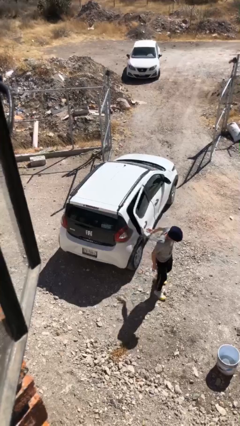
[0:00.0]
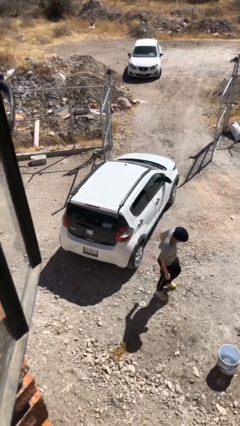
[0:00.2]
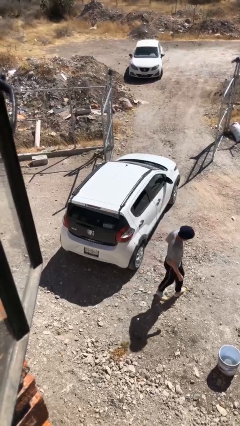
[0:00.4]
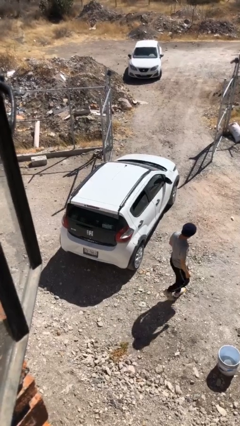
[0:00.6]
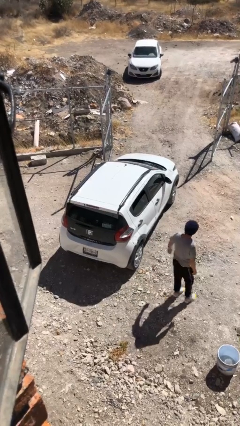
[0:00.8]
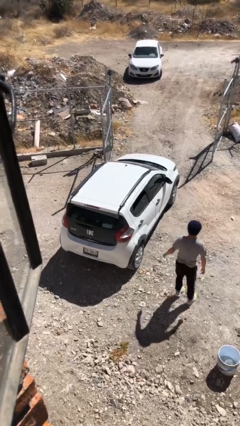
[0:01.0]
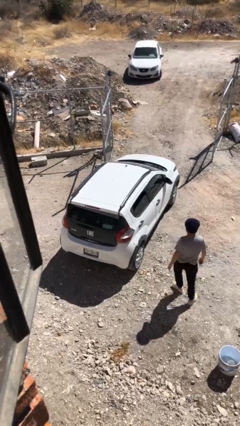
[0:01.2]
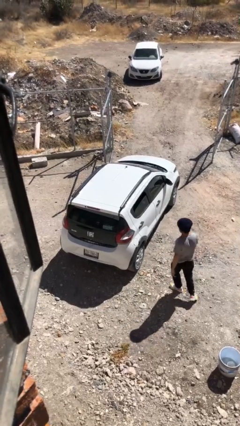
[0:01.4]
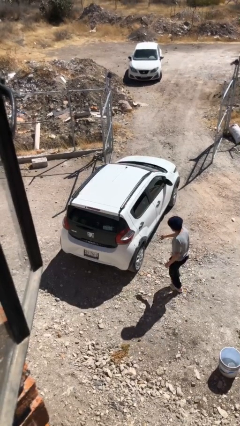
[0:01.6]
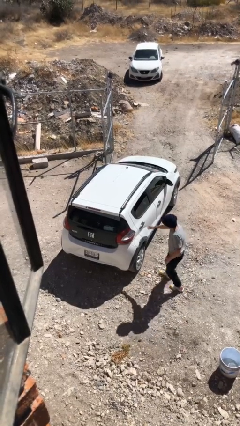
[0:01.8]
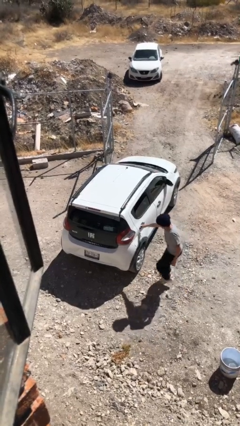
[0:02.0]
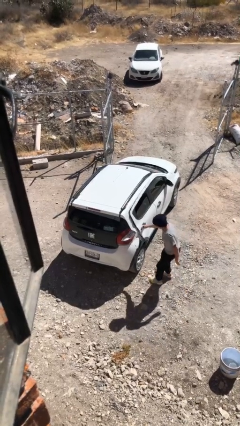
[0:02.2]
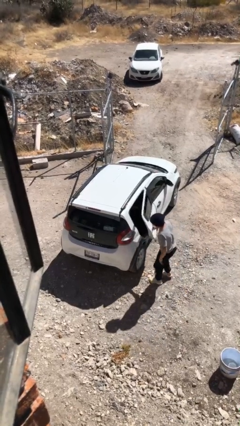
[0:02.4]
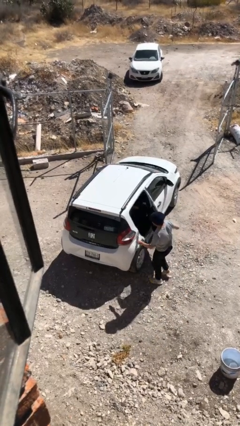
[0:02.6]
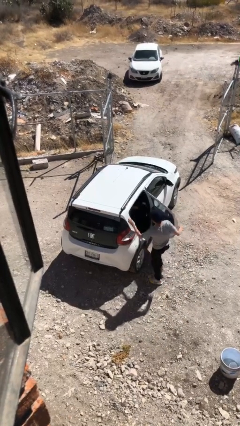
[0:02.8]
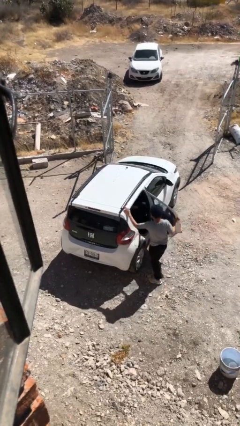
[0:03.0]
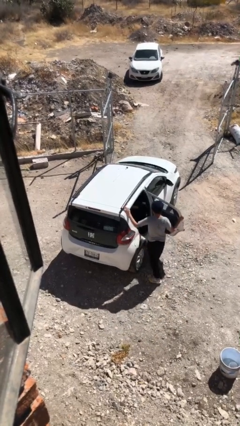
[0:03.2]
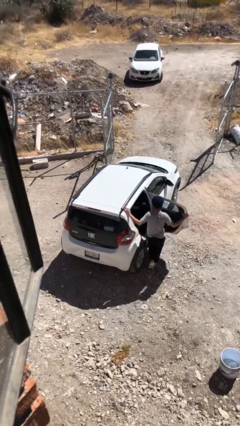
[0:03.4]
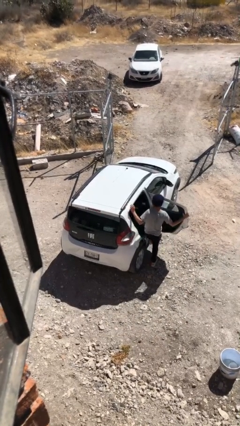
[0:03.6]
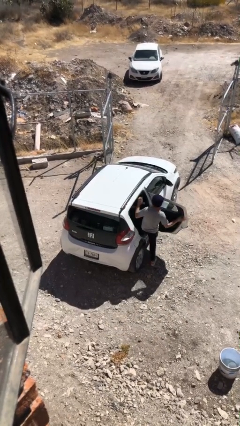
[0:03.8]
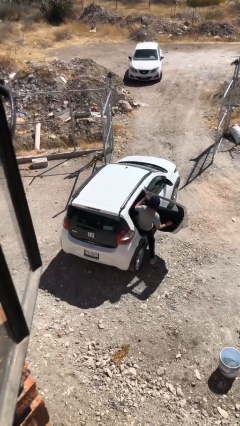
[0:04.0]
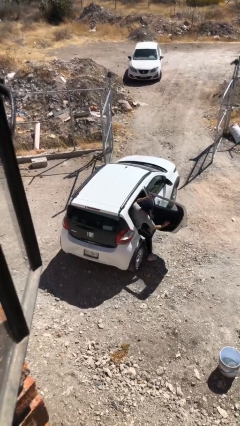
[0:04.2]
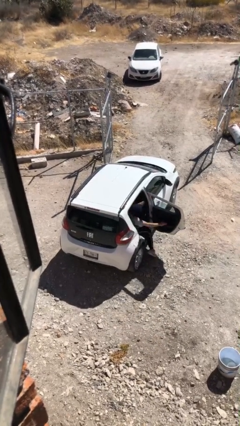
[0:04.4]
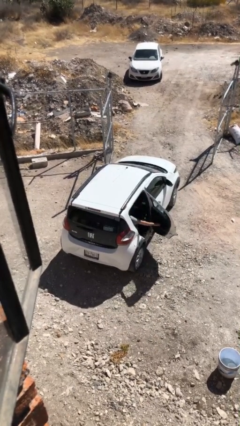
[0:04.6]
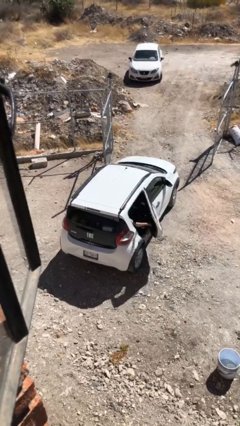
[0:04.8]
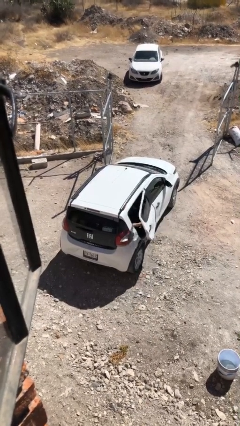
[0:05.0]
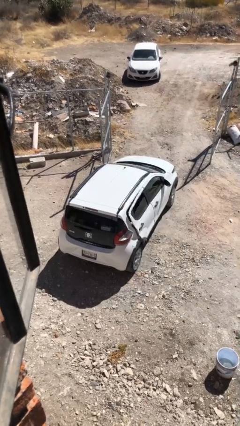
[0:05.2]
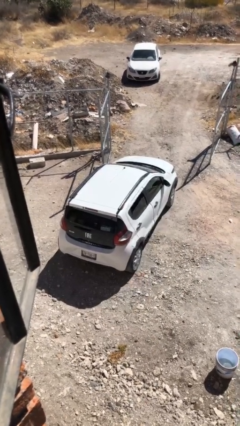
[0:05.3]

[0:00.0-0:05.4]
car picks up person

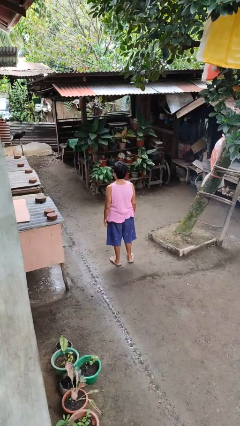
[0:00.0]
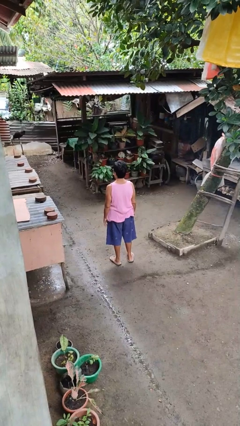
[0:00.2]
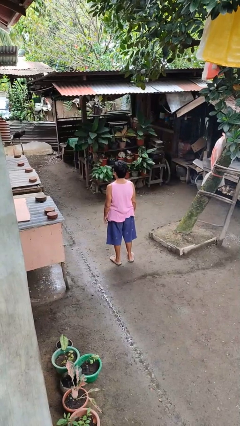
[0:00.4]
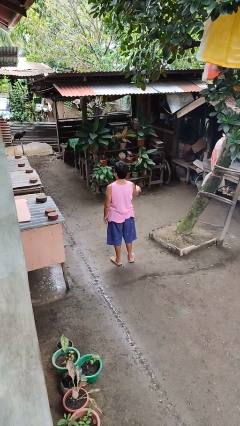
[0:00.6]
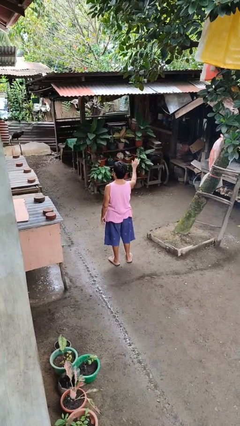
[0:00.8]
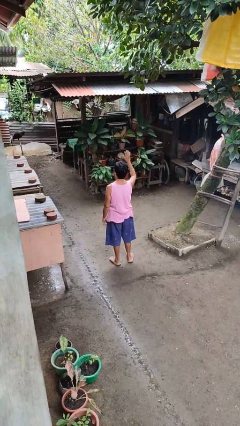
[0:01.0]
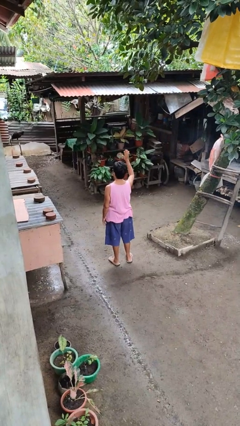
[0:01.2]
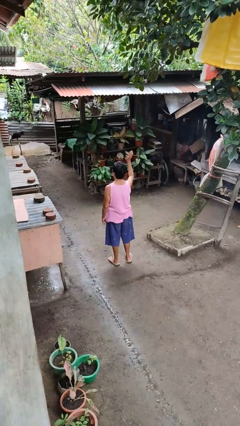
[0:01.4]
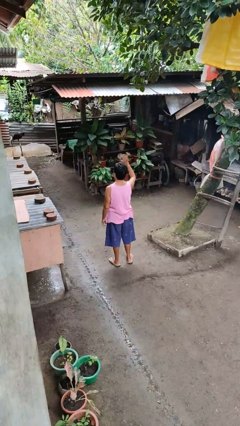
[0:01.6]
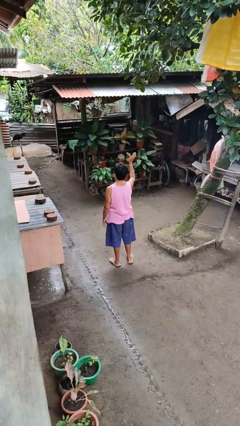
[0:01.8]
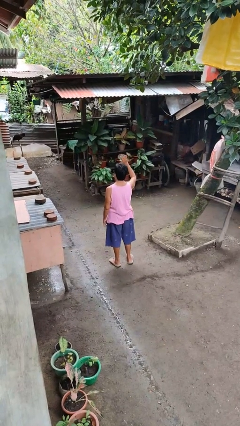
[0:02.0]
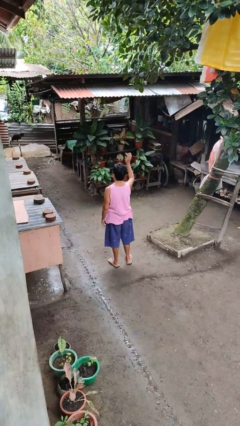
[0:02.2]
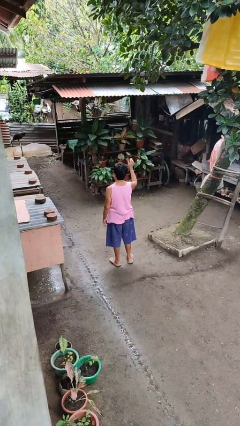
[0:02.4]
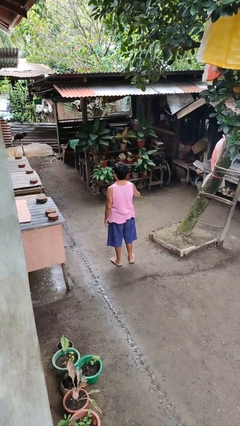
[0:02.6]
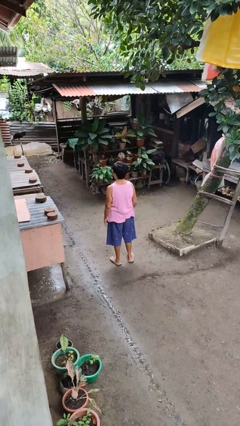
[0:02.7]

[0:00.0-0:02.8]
person waves at person

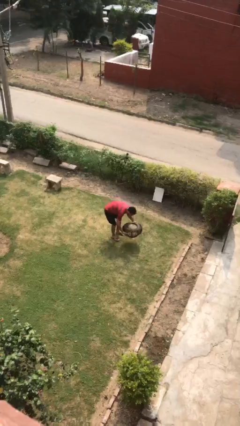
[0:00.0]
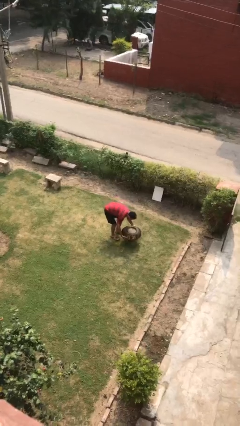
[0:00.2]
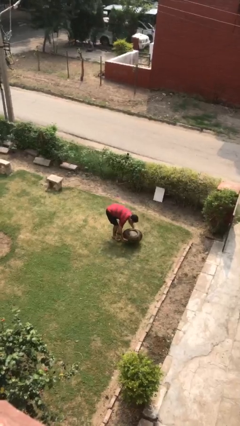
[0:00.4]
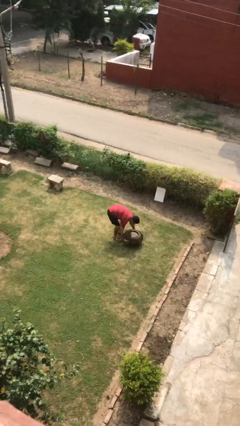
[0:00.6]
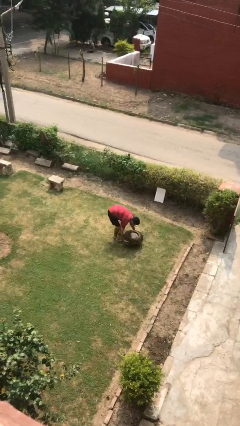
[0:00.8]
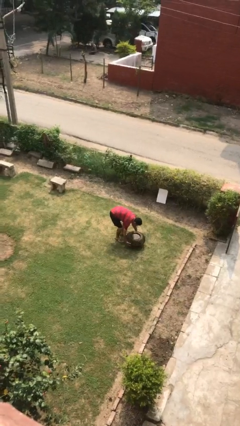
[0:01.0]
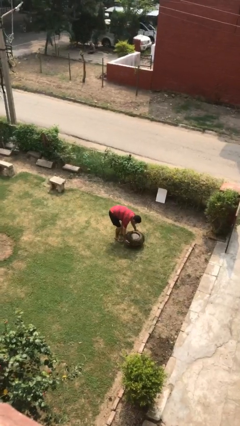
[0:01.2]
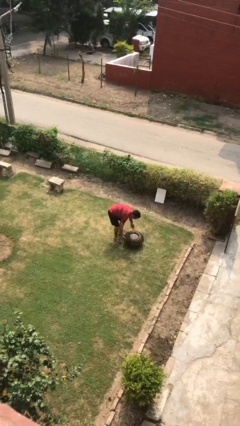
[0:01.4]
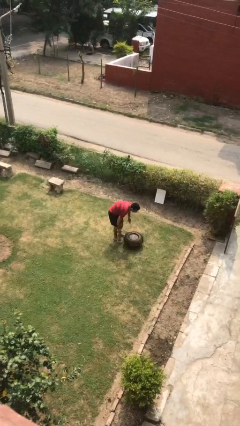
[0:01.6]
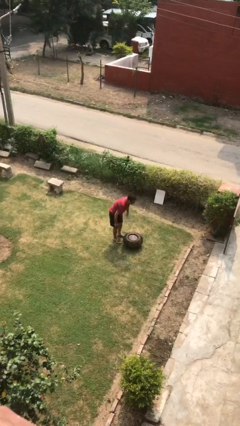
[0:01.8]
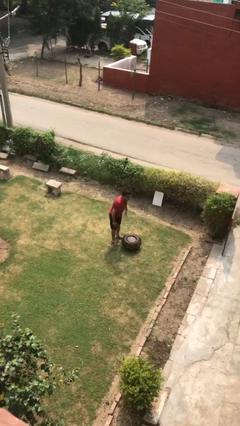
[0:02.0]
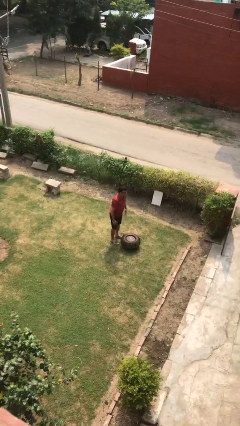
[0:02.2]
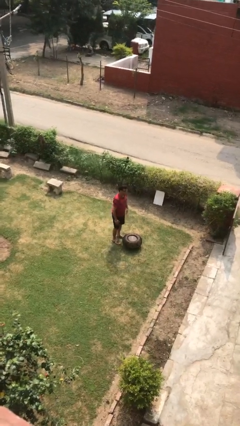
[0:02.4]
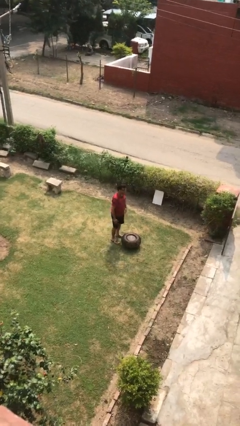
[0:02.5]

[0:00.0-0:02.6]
person puts down object on floor

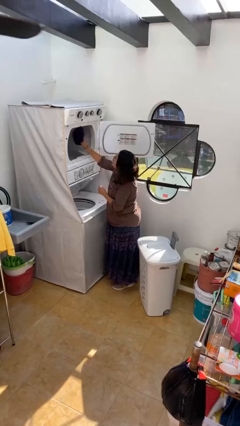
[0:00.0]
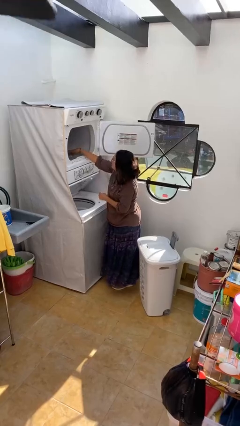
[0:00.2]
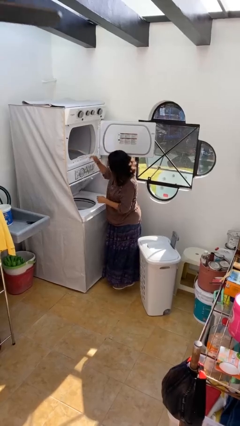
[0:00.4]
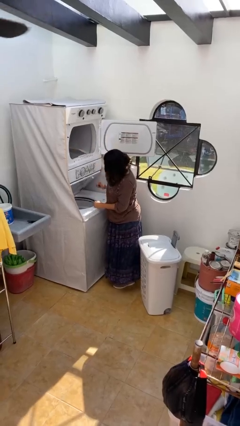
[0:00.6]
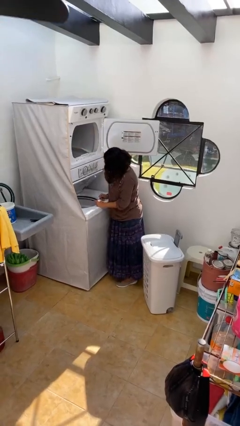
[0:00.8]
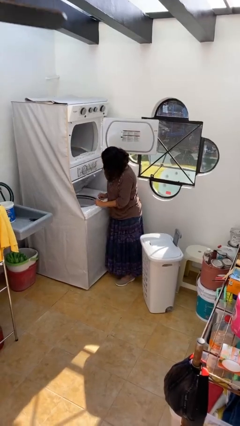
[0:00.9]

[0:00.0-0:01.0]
person loads dryer

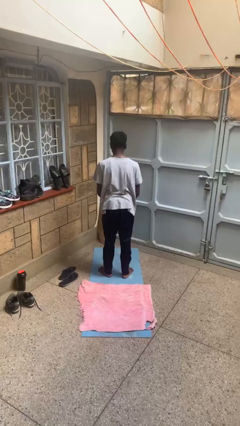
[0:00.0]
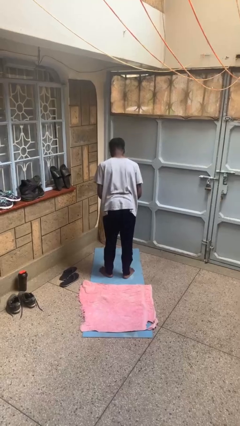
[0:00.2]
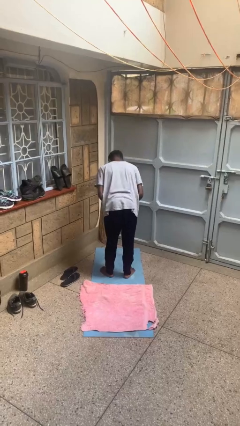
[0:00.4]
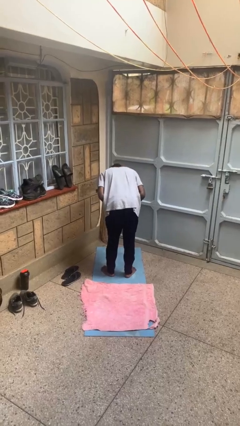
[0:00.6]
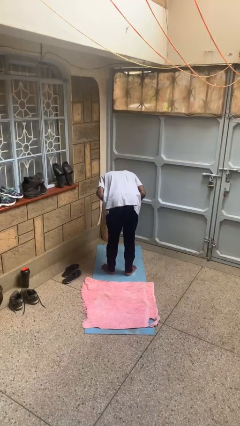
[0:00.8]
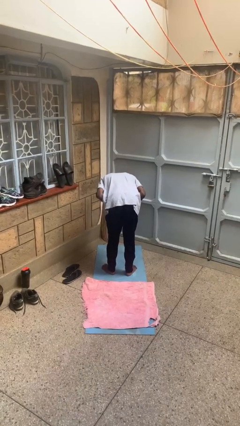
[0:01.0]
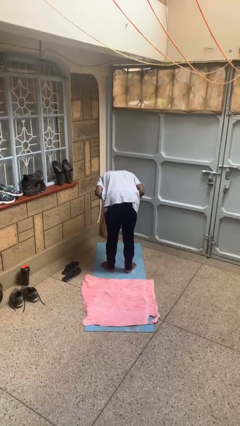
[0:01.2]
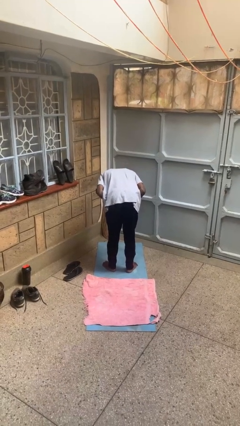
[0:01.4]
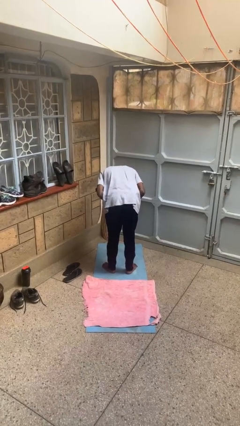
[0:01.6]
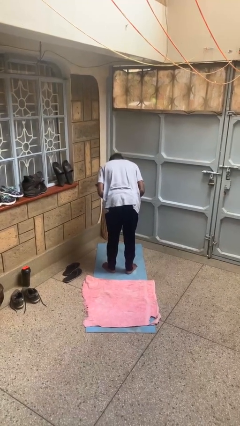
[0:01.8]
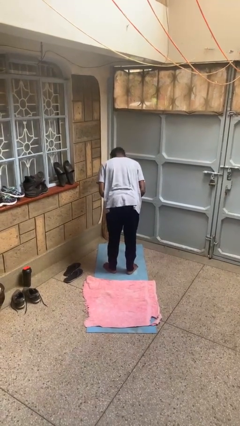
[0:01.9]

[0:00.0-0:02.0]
person bows

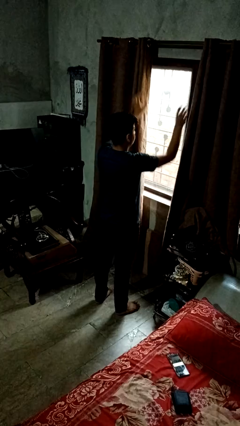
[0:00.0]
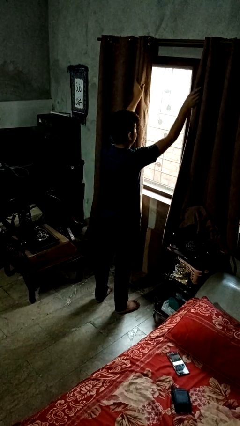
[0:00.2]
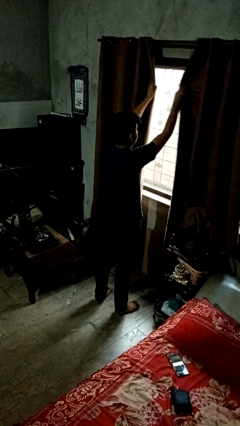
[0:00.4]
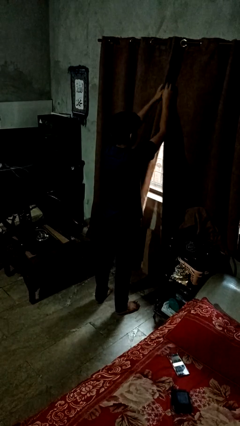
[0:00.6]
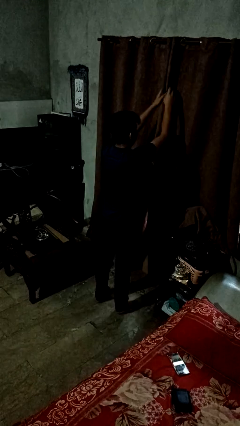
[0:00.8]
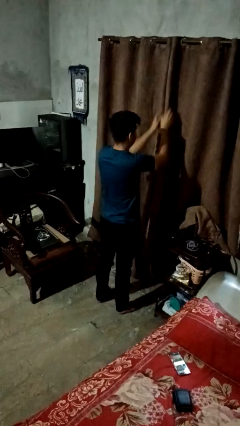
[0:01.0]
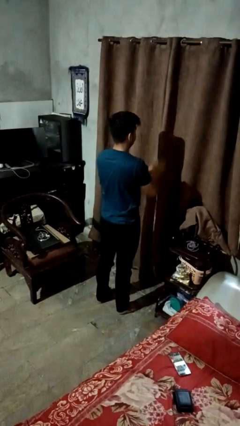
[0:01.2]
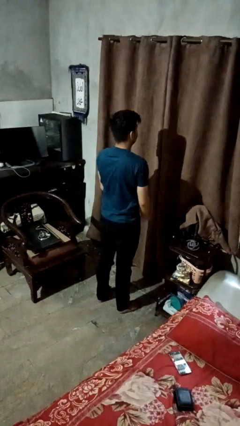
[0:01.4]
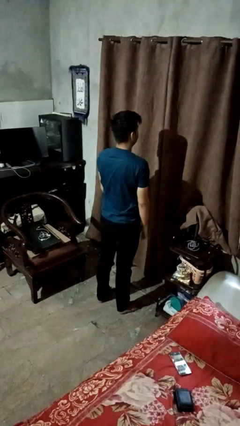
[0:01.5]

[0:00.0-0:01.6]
person closes curtains

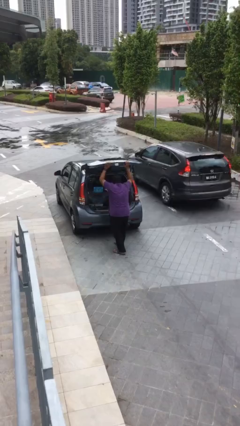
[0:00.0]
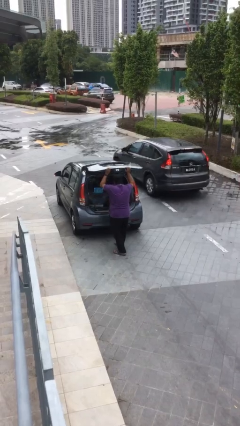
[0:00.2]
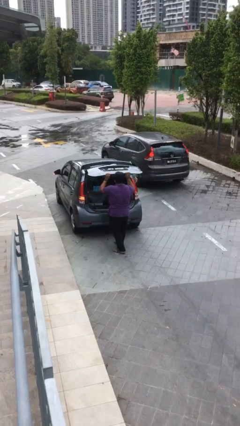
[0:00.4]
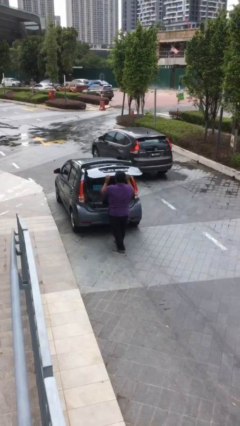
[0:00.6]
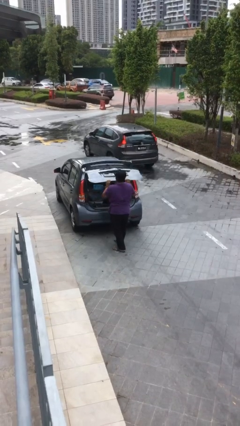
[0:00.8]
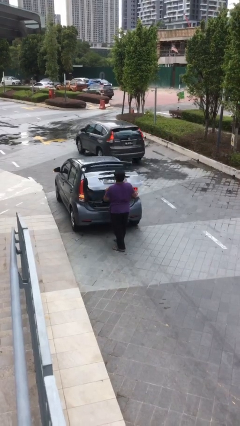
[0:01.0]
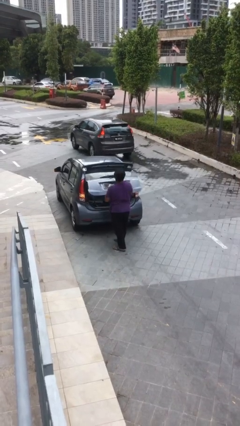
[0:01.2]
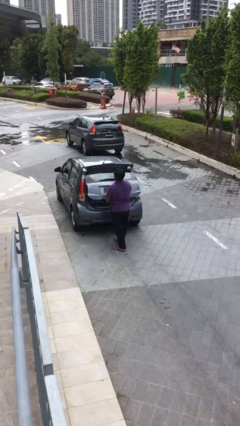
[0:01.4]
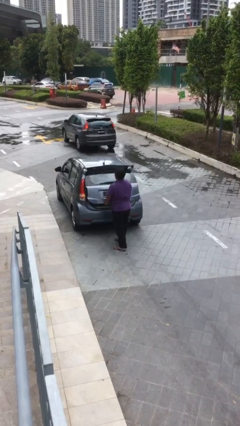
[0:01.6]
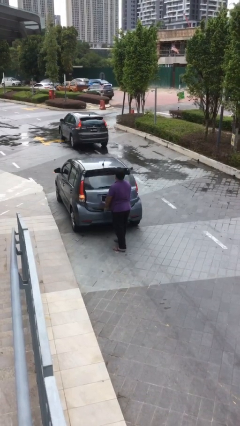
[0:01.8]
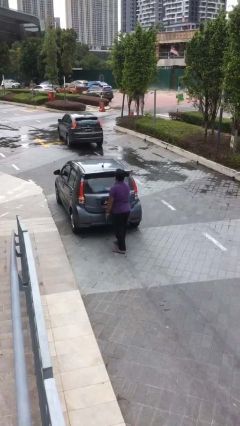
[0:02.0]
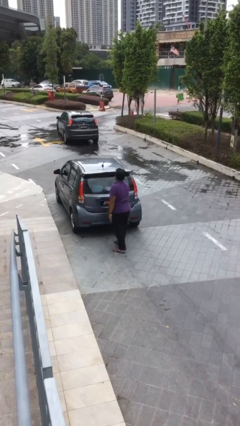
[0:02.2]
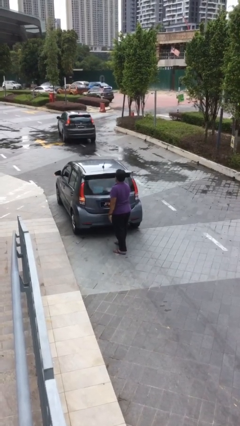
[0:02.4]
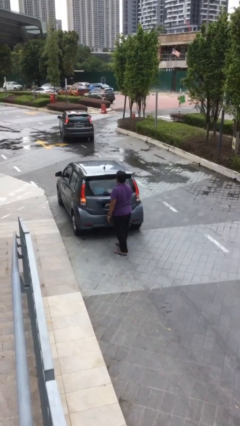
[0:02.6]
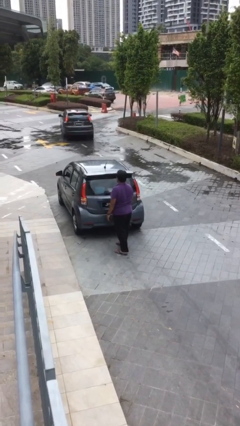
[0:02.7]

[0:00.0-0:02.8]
person closes car trunk
